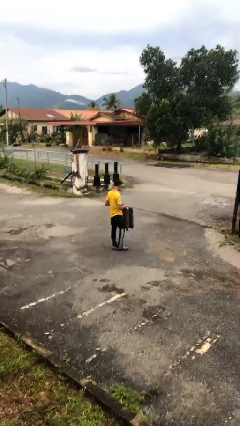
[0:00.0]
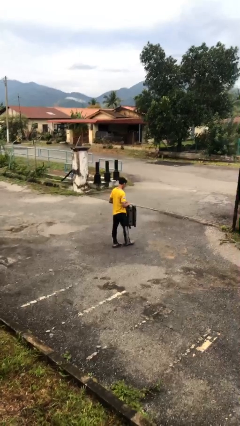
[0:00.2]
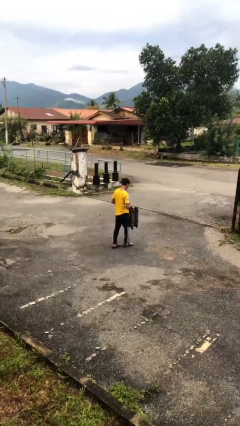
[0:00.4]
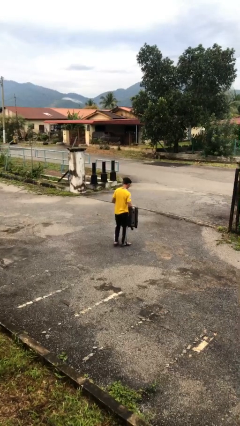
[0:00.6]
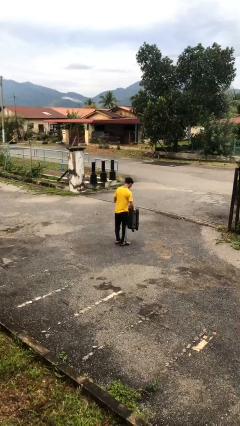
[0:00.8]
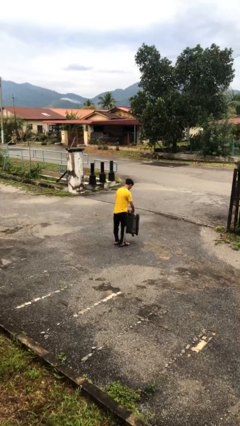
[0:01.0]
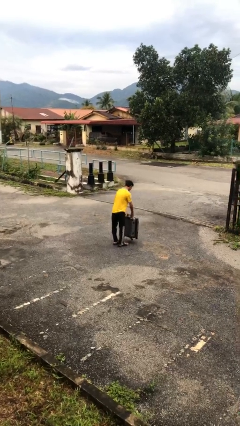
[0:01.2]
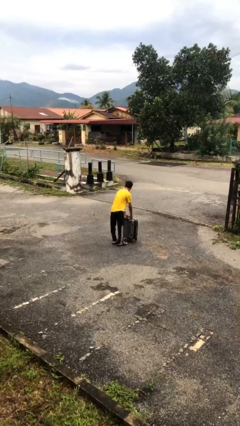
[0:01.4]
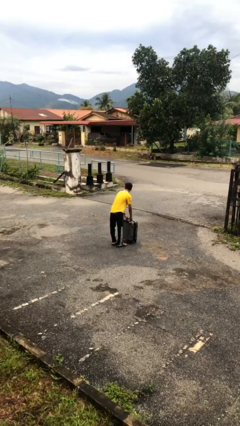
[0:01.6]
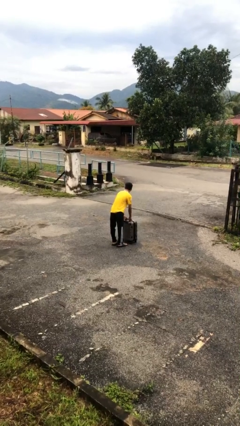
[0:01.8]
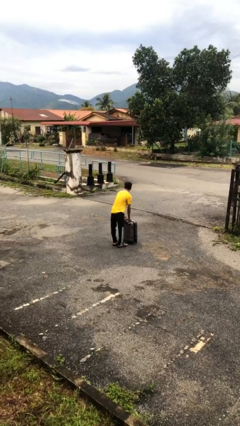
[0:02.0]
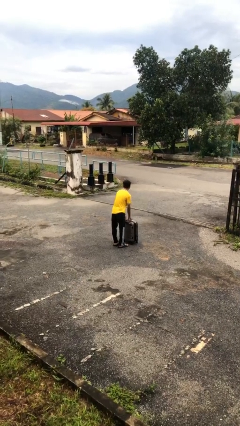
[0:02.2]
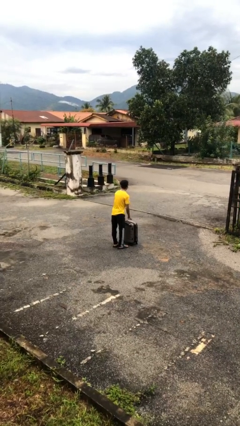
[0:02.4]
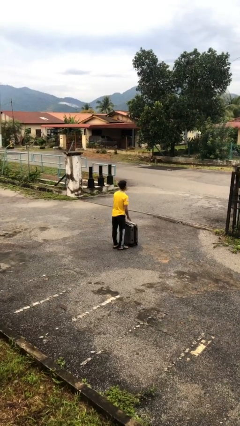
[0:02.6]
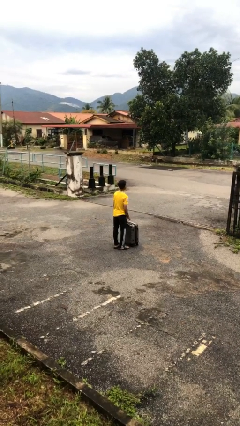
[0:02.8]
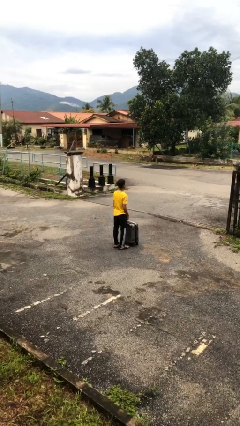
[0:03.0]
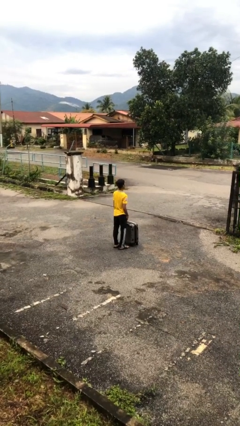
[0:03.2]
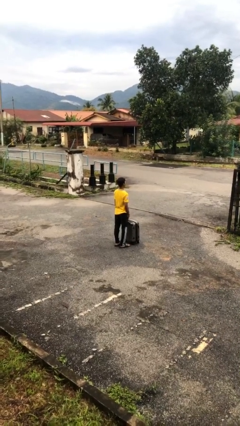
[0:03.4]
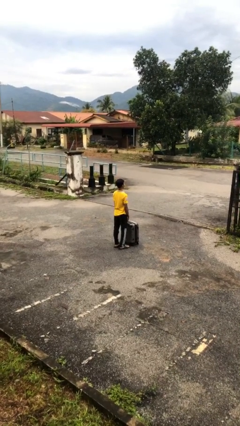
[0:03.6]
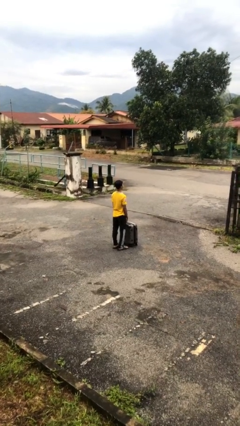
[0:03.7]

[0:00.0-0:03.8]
person puts down object on floor

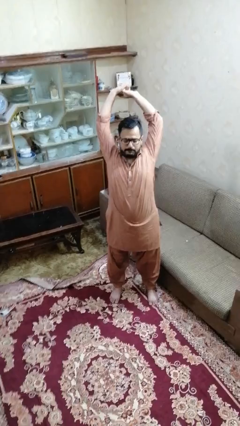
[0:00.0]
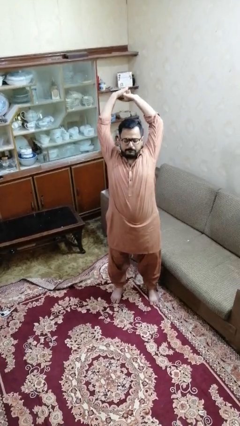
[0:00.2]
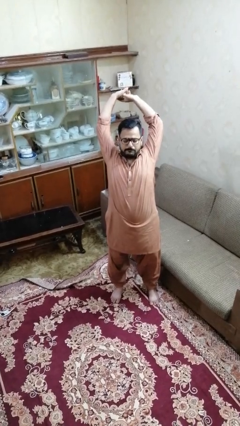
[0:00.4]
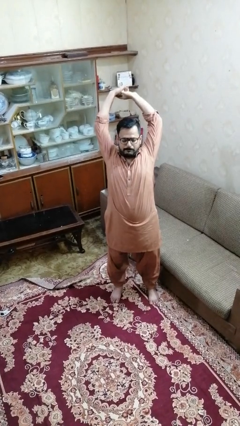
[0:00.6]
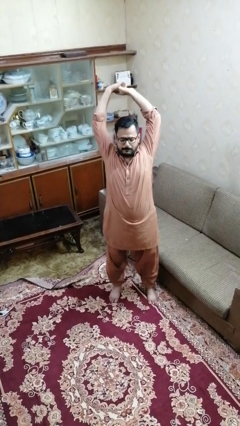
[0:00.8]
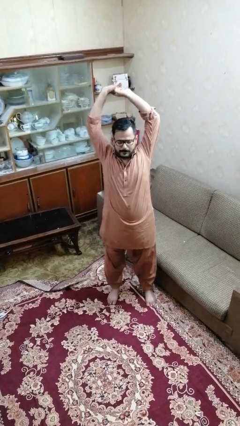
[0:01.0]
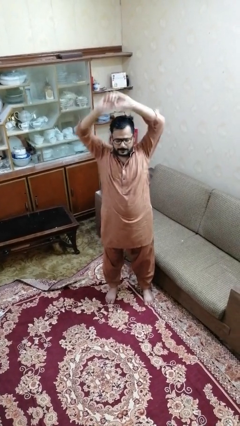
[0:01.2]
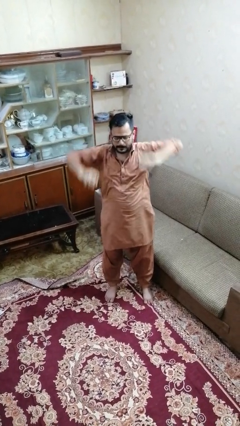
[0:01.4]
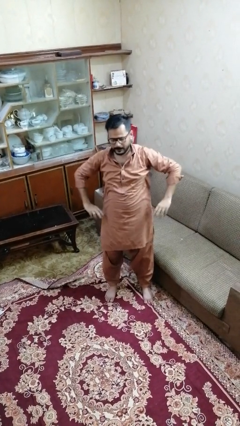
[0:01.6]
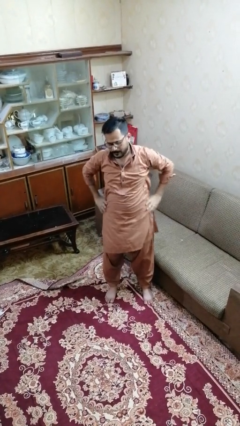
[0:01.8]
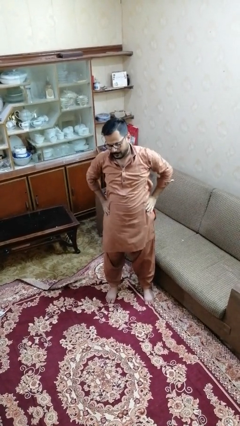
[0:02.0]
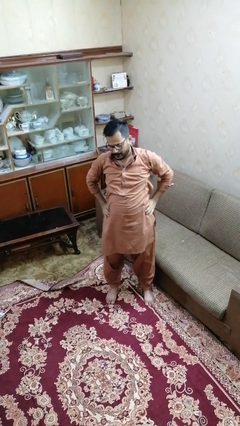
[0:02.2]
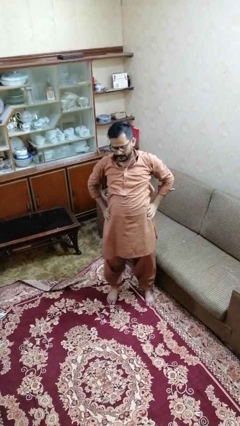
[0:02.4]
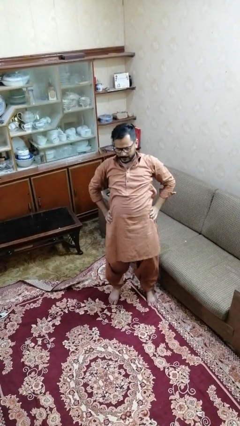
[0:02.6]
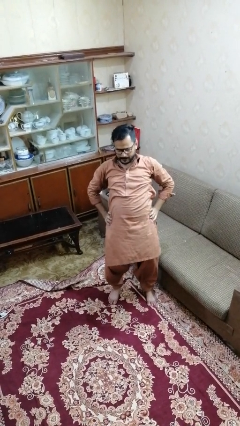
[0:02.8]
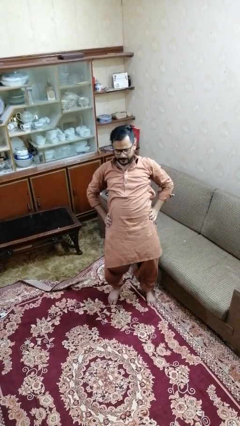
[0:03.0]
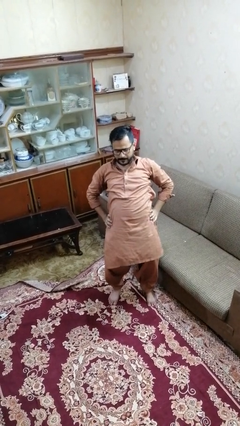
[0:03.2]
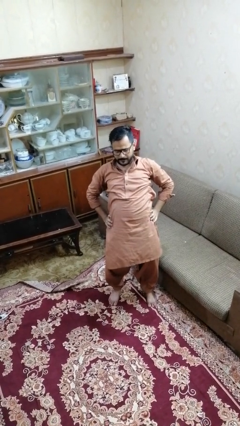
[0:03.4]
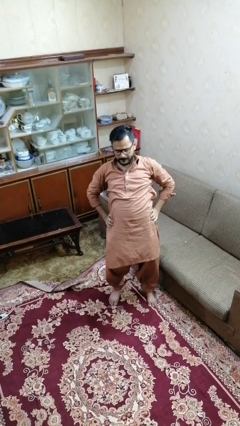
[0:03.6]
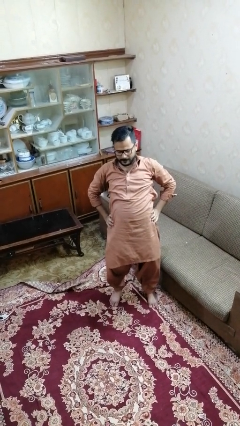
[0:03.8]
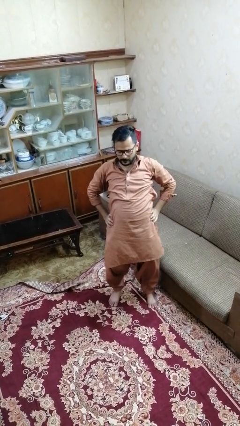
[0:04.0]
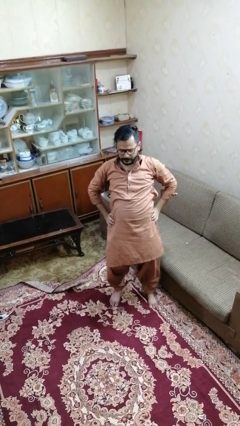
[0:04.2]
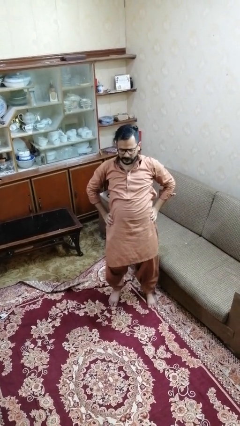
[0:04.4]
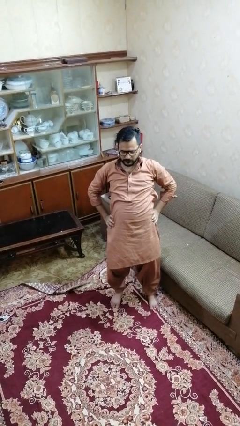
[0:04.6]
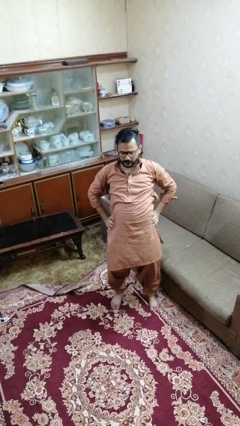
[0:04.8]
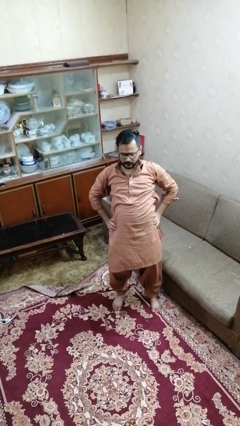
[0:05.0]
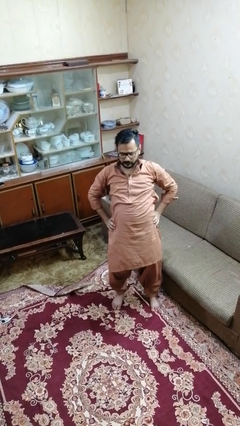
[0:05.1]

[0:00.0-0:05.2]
person stretches back

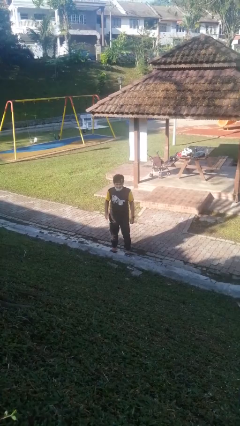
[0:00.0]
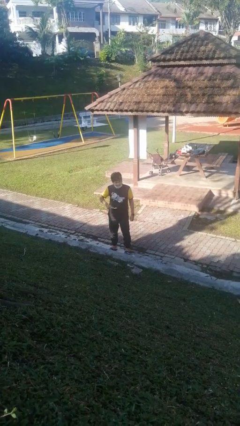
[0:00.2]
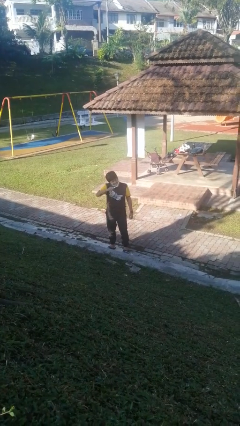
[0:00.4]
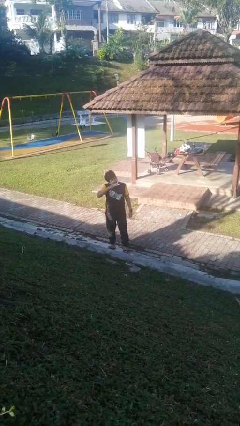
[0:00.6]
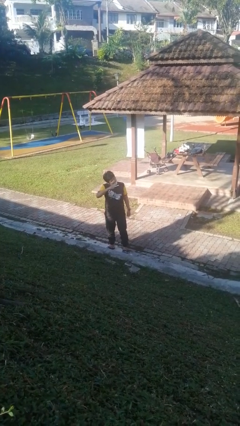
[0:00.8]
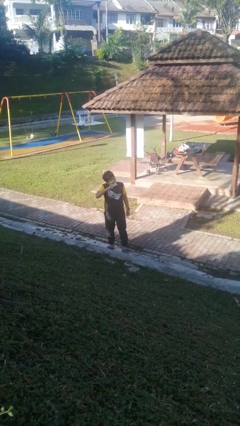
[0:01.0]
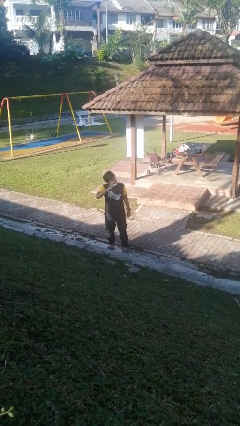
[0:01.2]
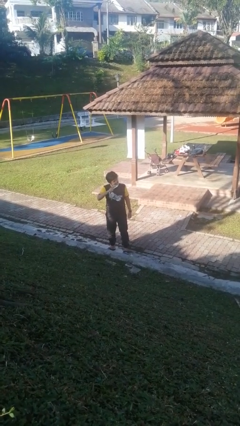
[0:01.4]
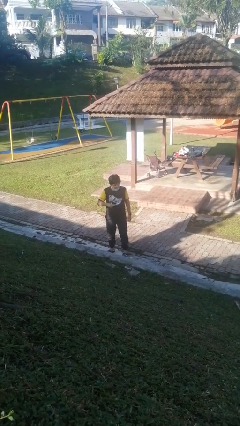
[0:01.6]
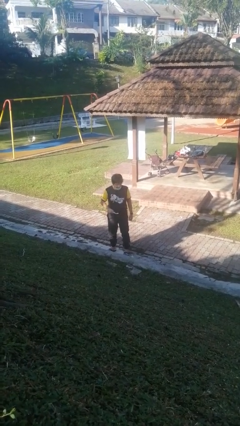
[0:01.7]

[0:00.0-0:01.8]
person brushes teeth

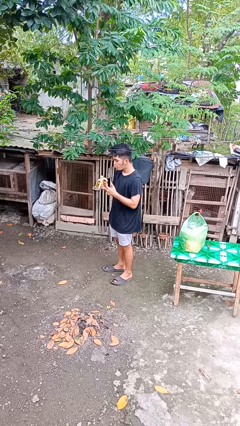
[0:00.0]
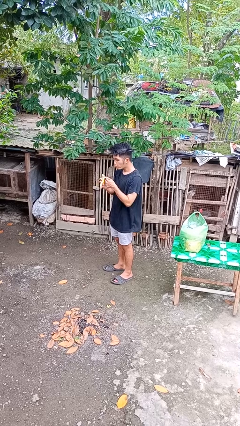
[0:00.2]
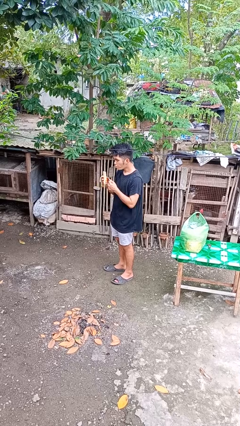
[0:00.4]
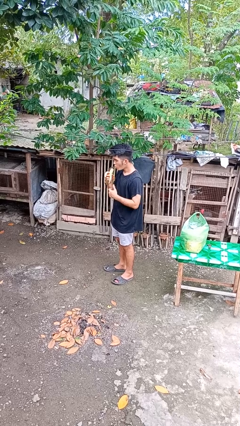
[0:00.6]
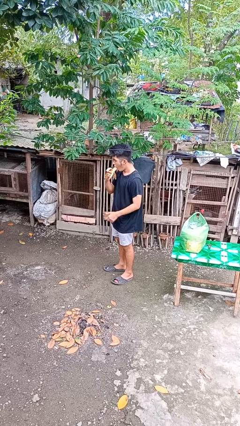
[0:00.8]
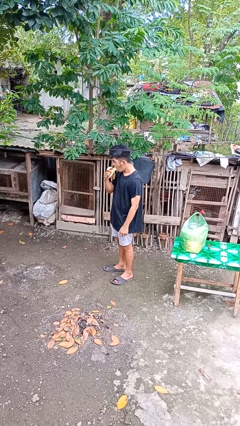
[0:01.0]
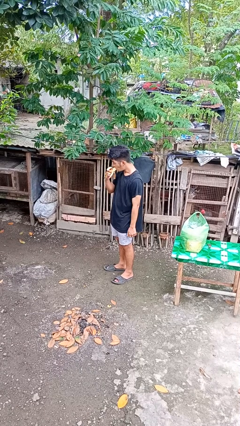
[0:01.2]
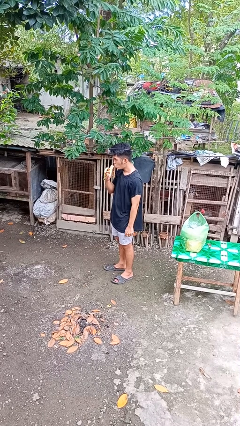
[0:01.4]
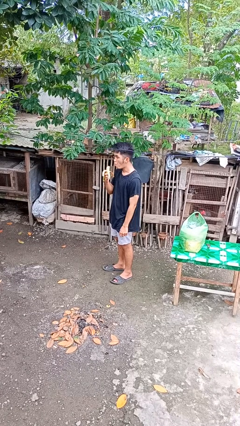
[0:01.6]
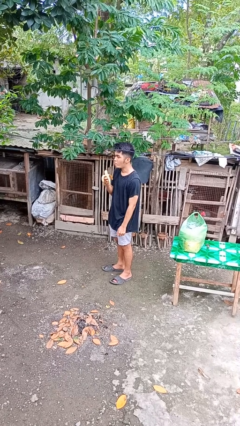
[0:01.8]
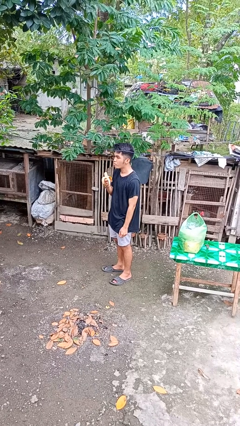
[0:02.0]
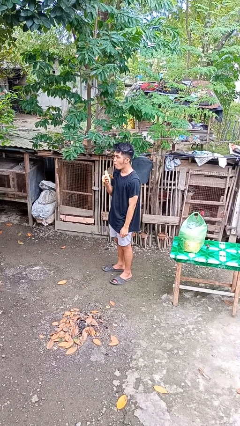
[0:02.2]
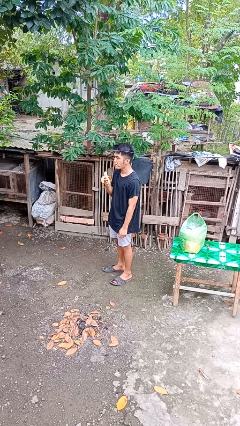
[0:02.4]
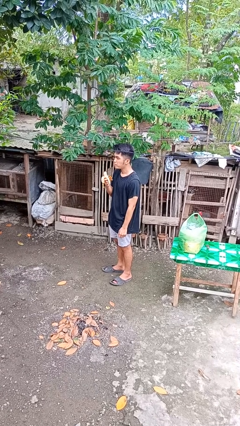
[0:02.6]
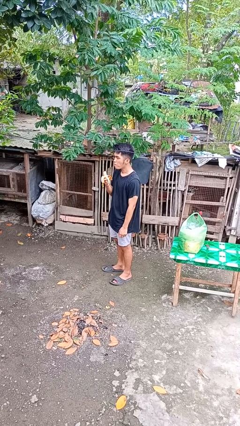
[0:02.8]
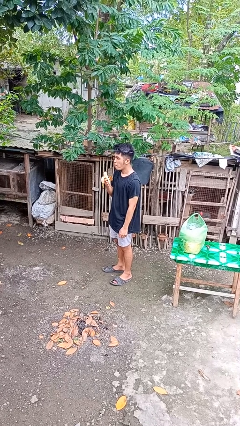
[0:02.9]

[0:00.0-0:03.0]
person eats banana

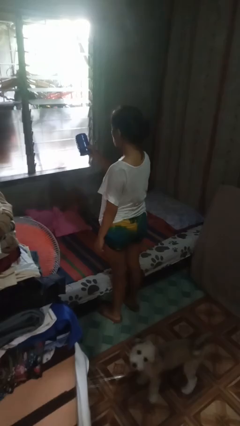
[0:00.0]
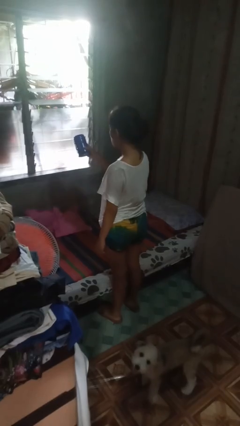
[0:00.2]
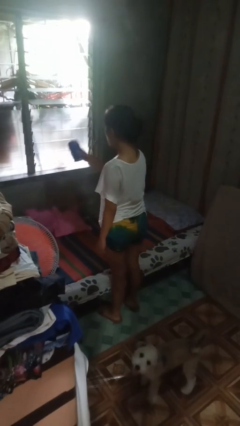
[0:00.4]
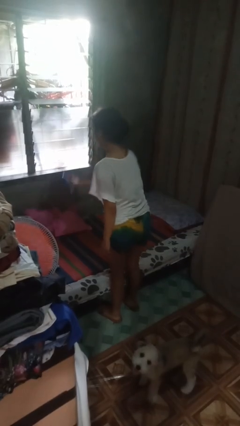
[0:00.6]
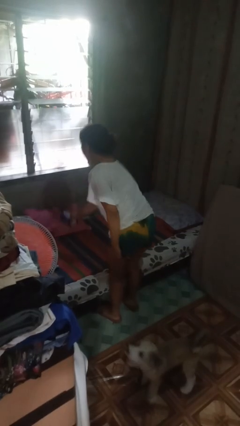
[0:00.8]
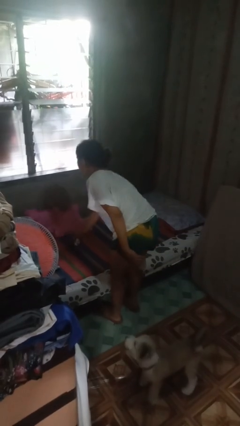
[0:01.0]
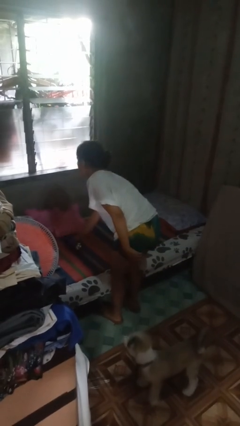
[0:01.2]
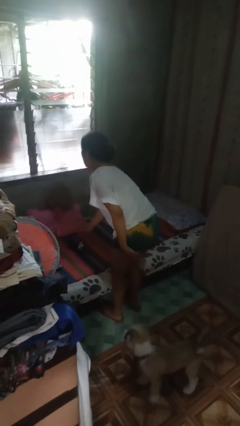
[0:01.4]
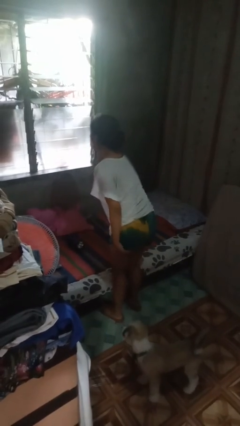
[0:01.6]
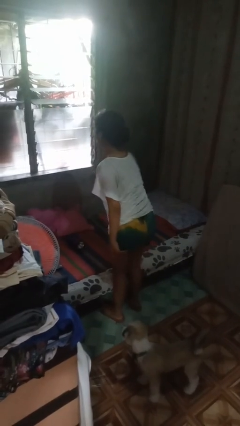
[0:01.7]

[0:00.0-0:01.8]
person puts down object on bed

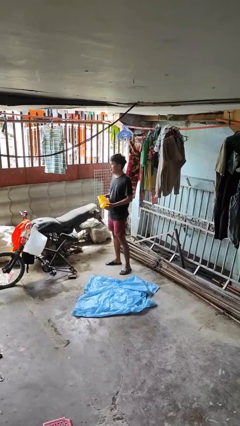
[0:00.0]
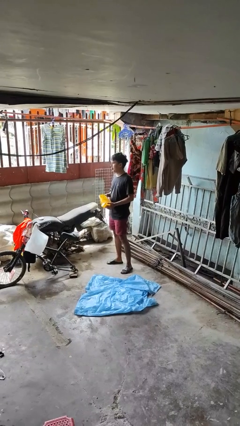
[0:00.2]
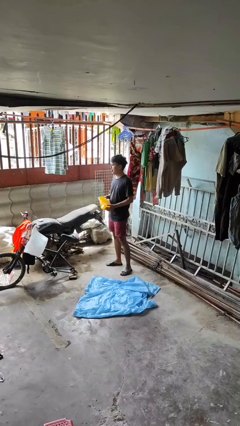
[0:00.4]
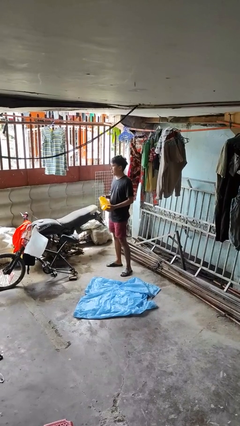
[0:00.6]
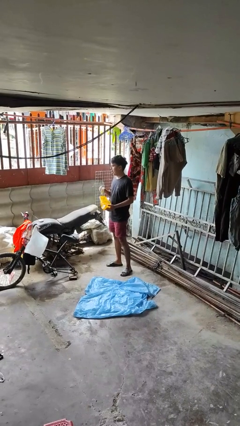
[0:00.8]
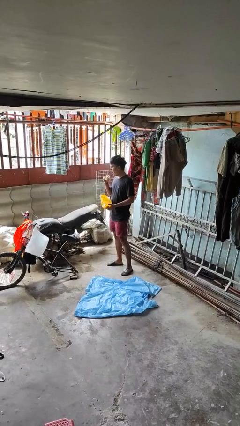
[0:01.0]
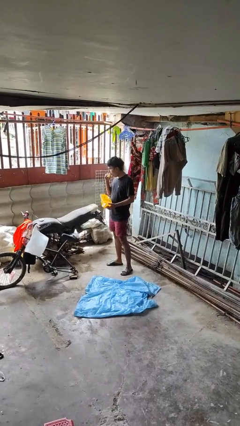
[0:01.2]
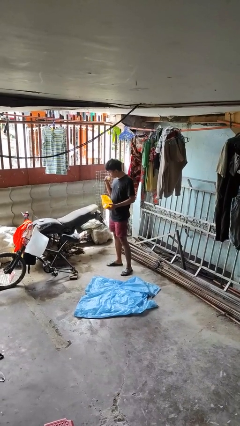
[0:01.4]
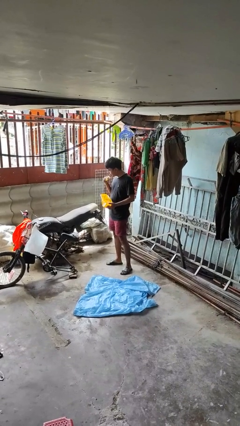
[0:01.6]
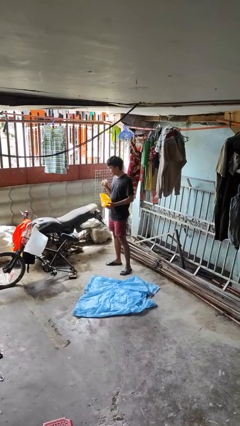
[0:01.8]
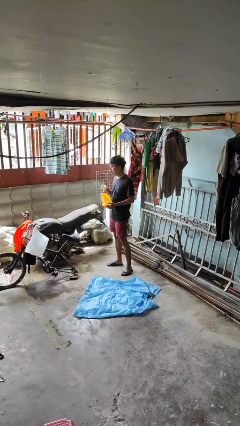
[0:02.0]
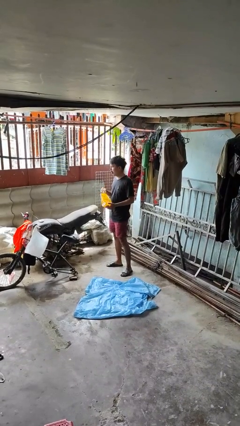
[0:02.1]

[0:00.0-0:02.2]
person eats snack from bag
